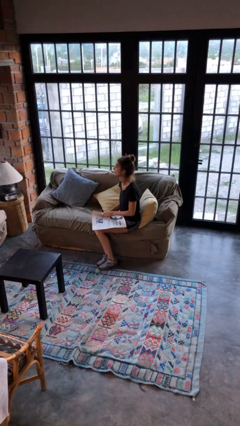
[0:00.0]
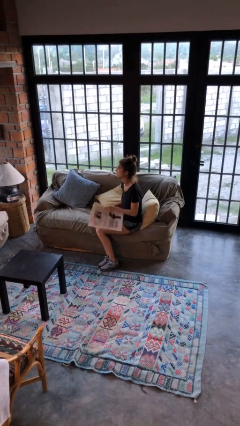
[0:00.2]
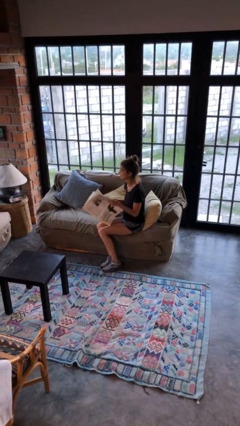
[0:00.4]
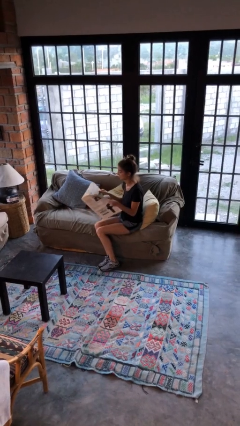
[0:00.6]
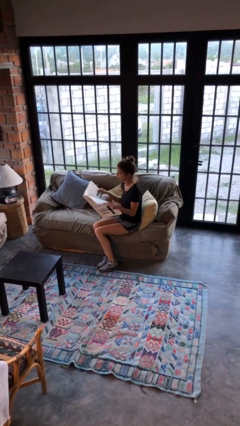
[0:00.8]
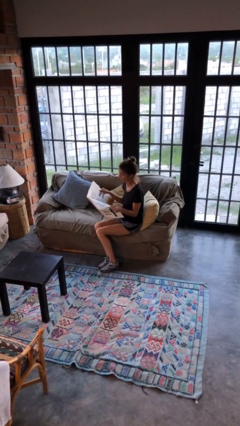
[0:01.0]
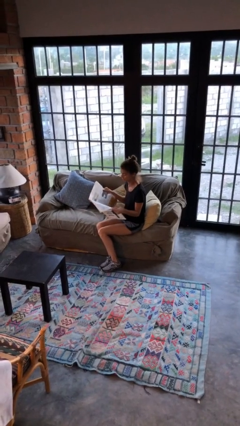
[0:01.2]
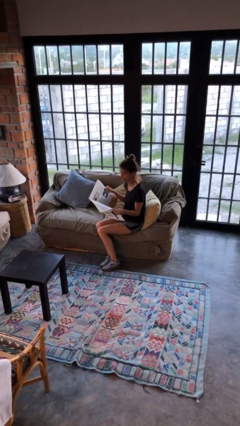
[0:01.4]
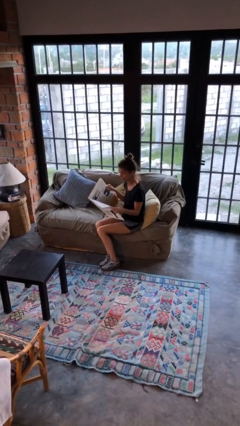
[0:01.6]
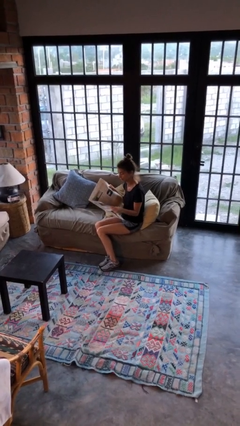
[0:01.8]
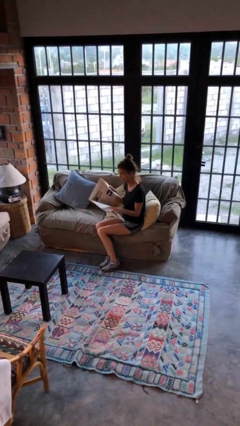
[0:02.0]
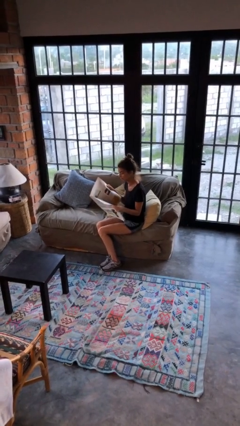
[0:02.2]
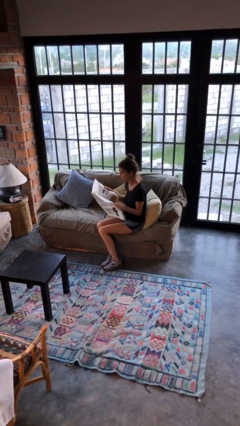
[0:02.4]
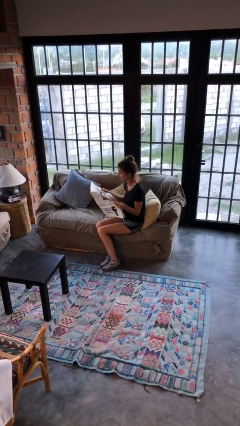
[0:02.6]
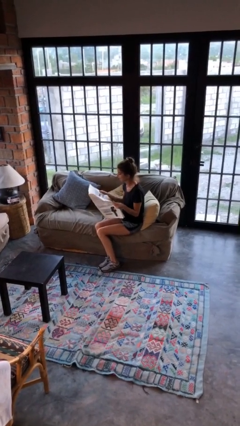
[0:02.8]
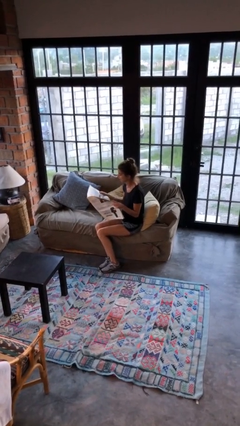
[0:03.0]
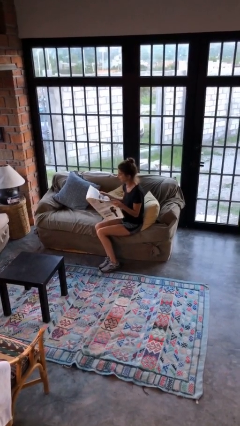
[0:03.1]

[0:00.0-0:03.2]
person reads newspaper

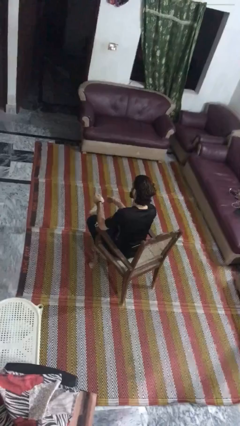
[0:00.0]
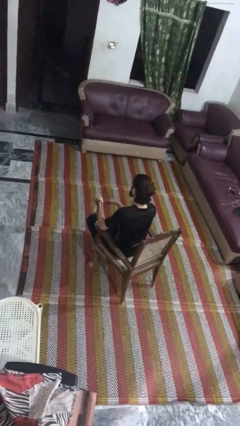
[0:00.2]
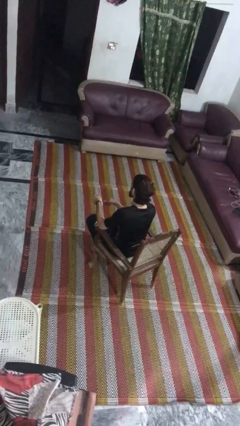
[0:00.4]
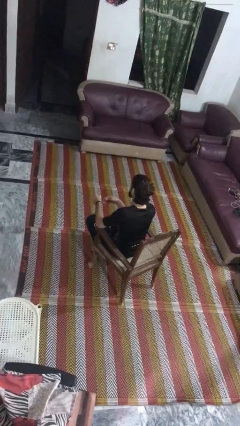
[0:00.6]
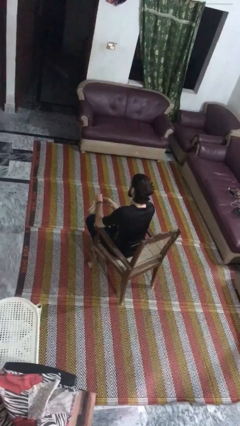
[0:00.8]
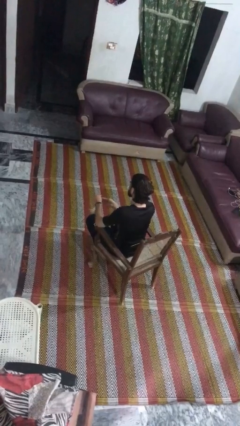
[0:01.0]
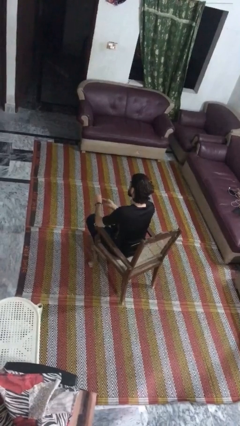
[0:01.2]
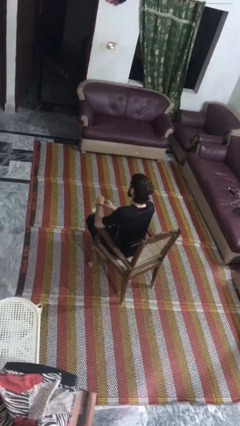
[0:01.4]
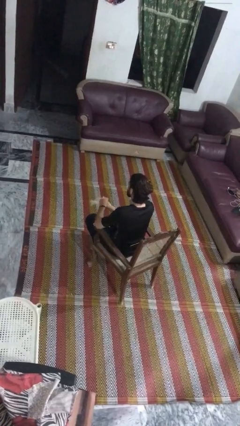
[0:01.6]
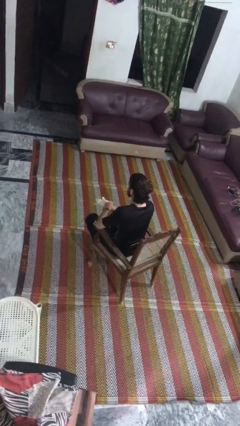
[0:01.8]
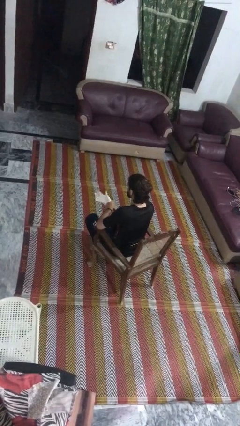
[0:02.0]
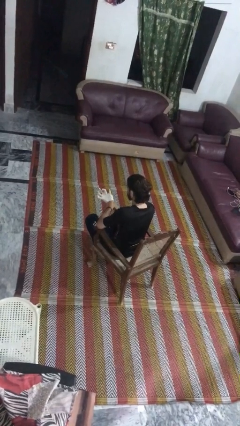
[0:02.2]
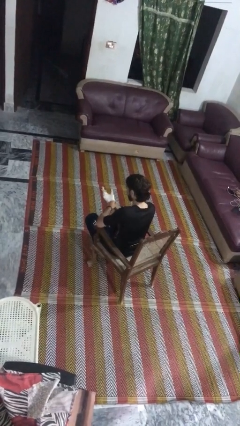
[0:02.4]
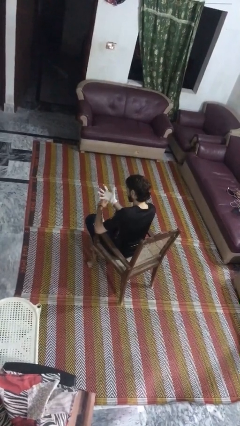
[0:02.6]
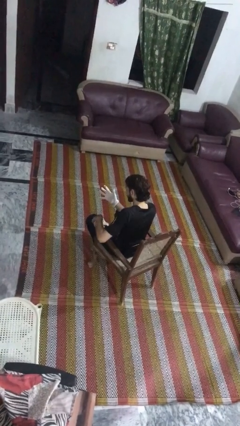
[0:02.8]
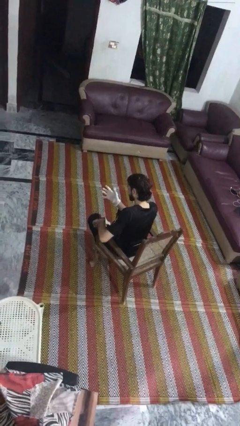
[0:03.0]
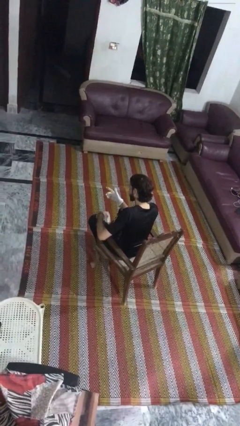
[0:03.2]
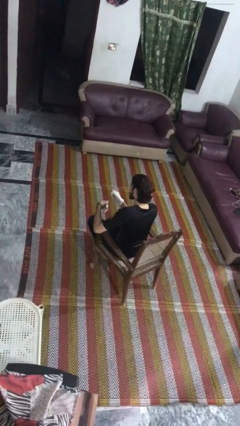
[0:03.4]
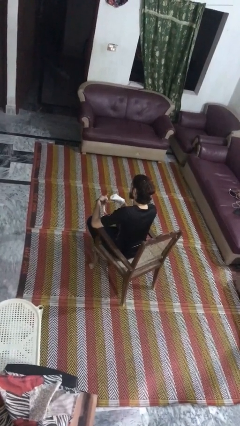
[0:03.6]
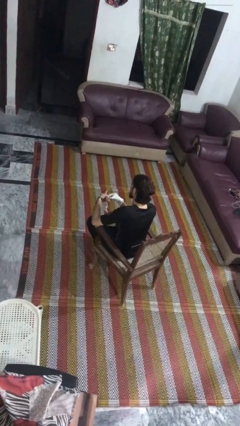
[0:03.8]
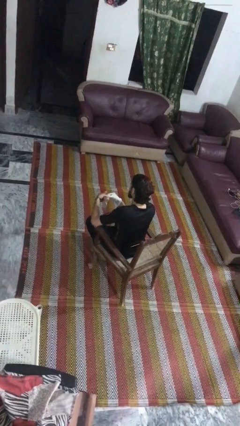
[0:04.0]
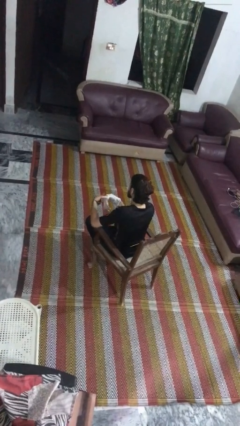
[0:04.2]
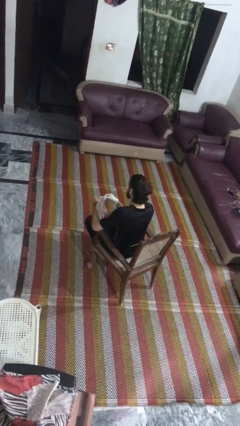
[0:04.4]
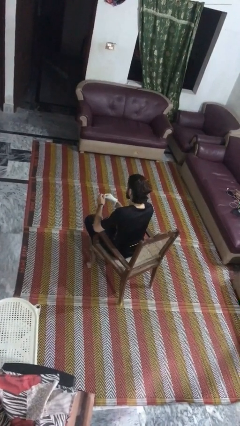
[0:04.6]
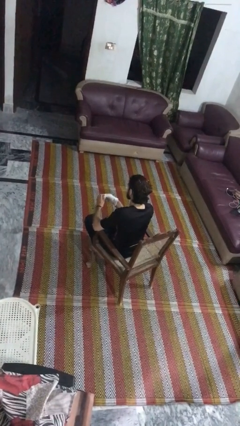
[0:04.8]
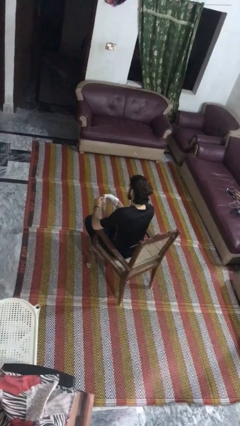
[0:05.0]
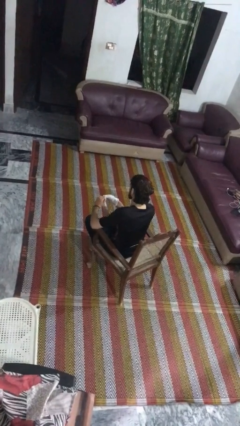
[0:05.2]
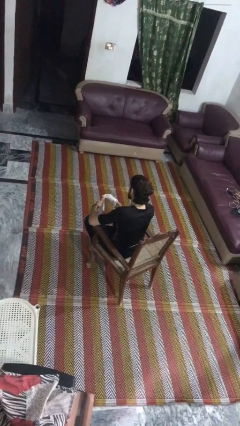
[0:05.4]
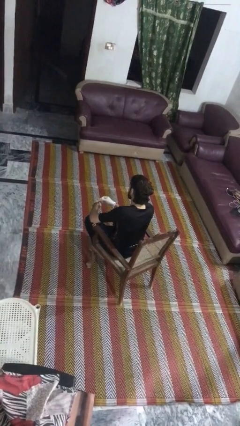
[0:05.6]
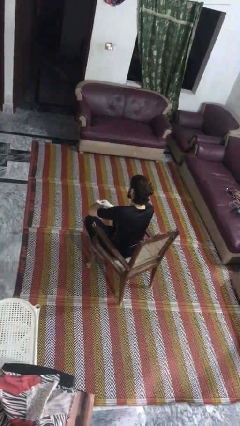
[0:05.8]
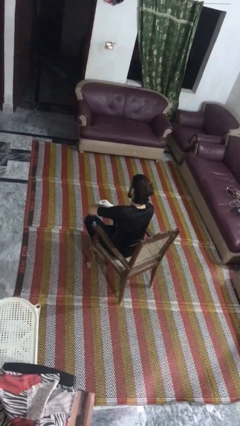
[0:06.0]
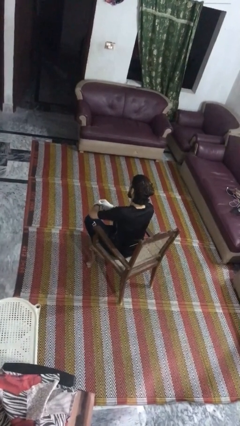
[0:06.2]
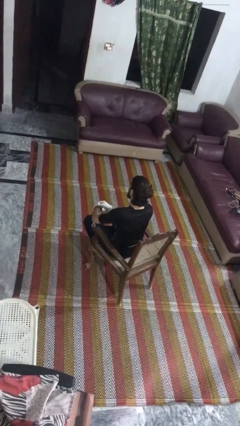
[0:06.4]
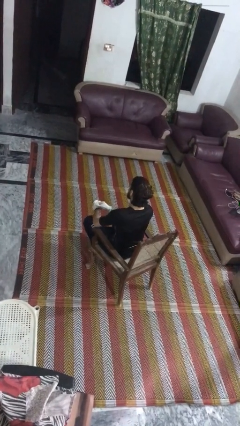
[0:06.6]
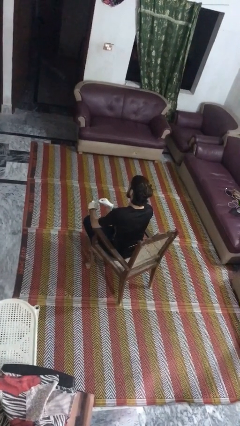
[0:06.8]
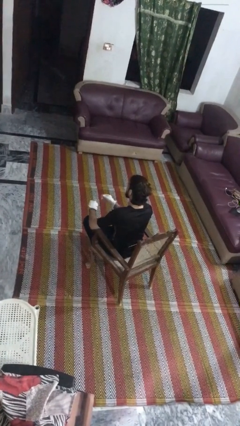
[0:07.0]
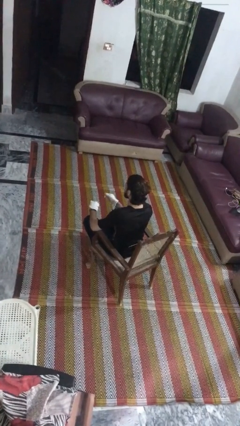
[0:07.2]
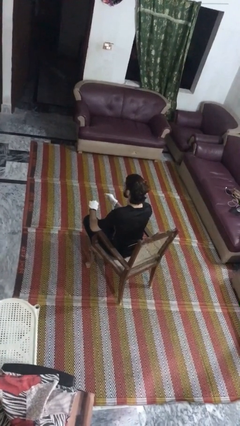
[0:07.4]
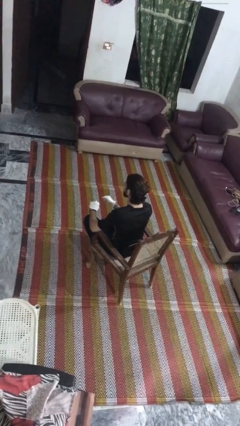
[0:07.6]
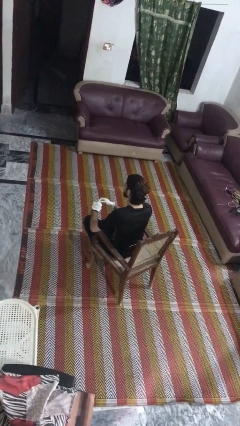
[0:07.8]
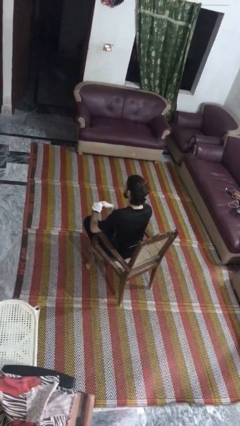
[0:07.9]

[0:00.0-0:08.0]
person puts on gloves

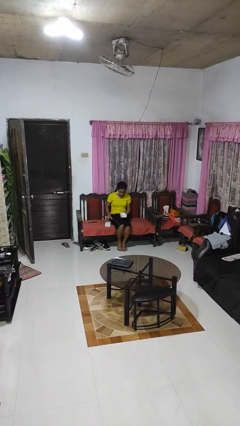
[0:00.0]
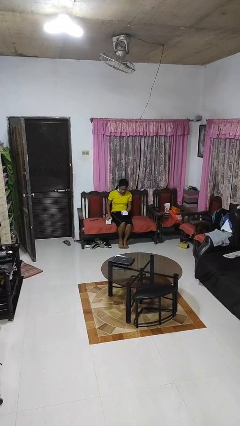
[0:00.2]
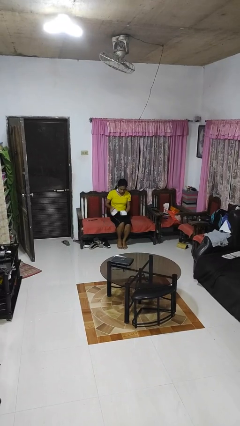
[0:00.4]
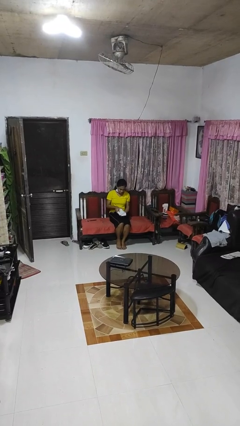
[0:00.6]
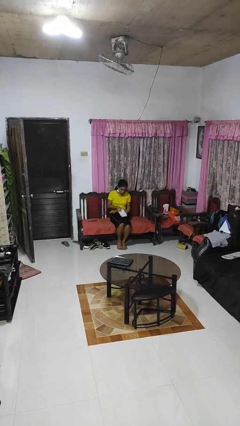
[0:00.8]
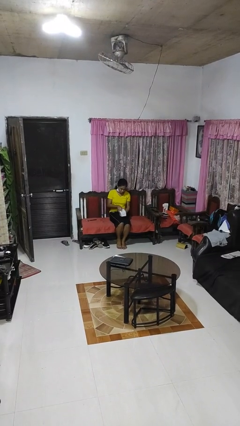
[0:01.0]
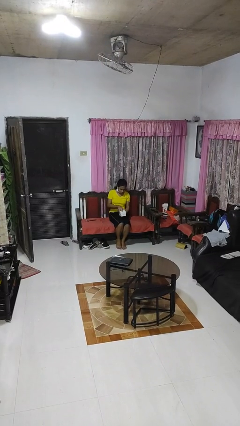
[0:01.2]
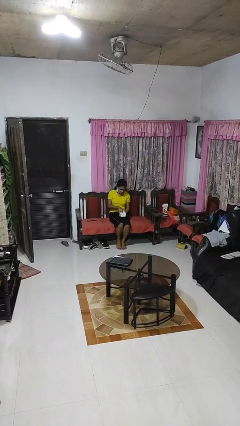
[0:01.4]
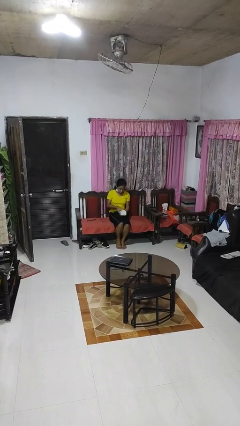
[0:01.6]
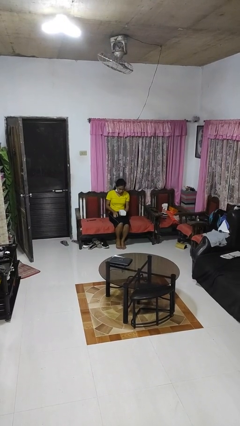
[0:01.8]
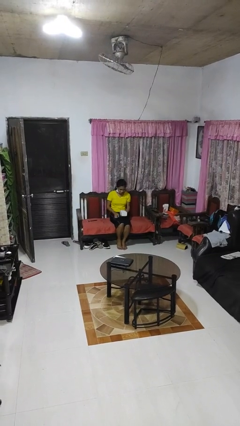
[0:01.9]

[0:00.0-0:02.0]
person closes jewelry box

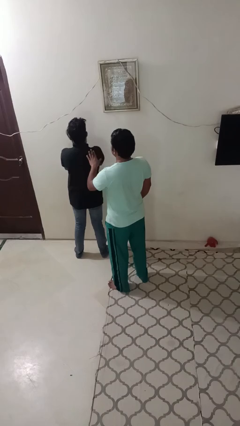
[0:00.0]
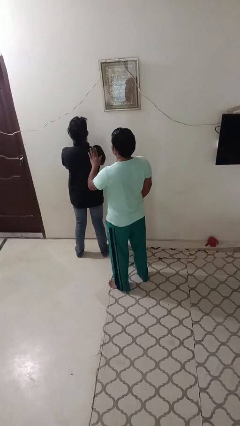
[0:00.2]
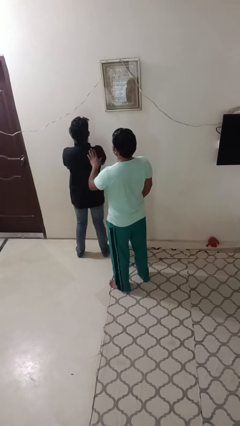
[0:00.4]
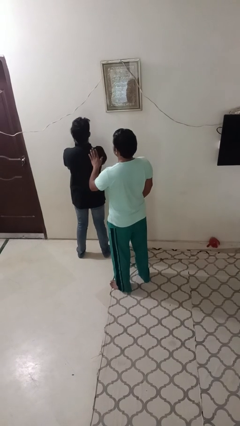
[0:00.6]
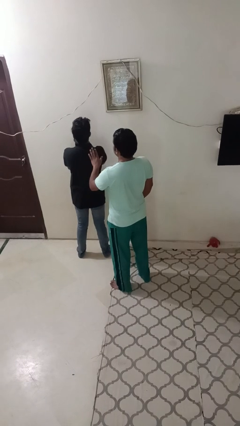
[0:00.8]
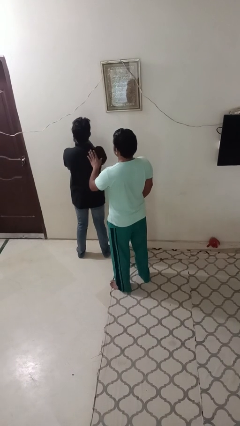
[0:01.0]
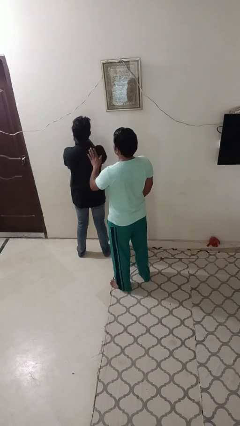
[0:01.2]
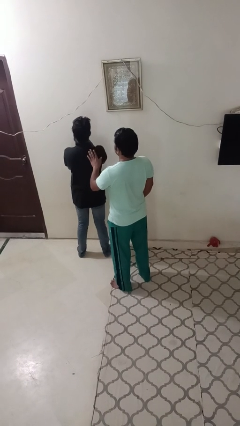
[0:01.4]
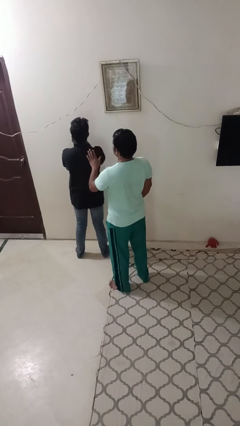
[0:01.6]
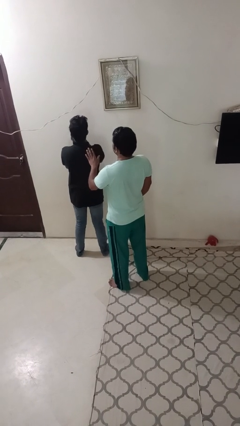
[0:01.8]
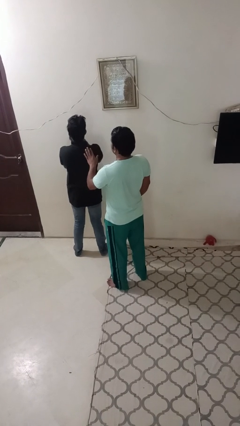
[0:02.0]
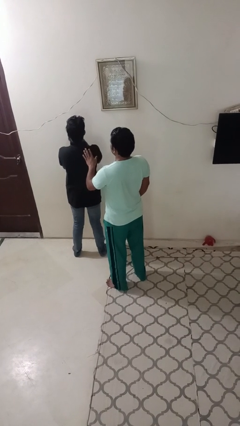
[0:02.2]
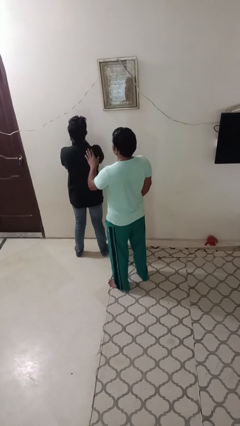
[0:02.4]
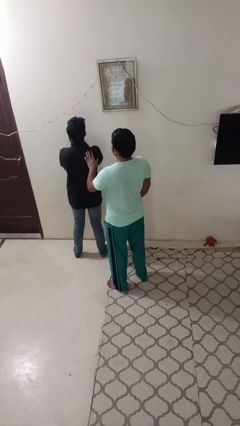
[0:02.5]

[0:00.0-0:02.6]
person touches back of person

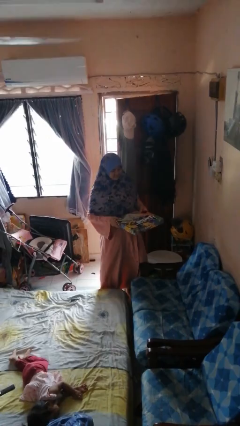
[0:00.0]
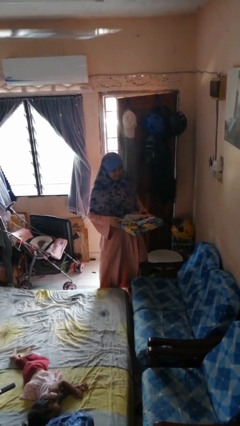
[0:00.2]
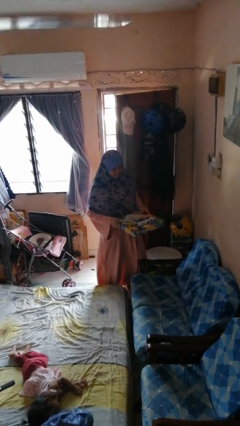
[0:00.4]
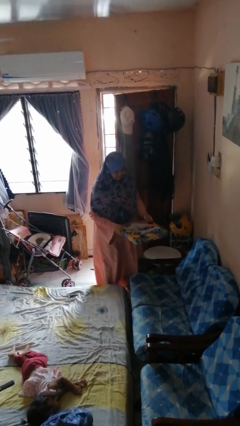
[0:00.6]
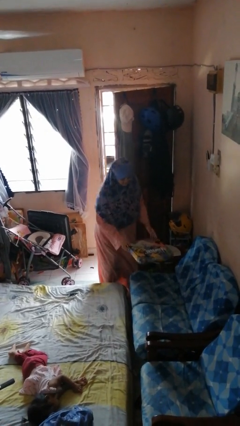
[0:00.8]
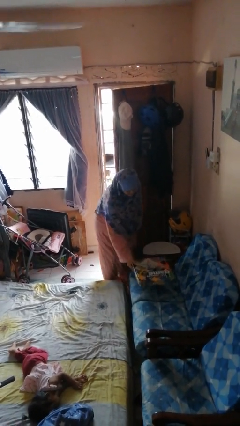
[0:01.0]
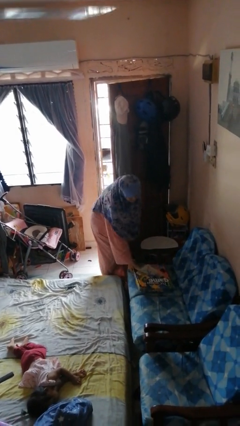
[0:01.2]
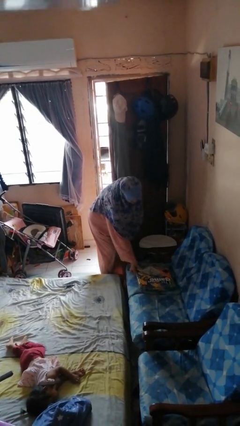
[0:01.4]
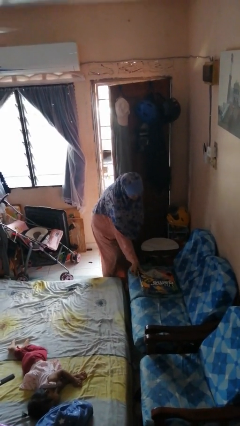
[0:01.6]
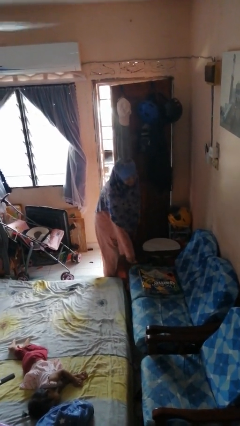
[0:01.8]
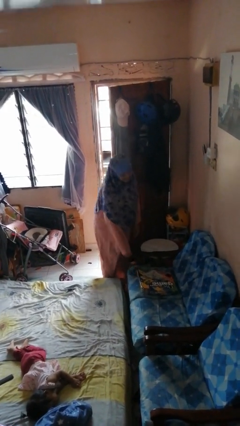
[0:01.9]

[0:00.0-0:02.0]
person puts down object on couch
